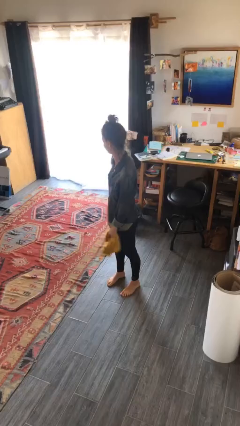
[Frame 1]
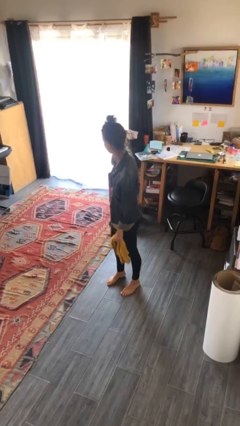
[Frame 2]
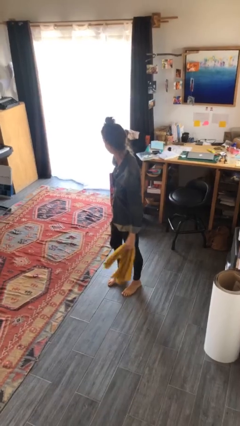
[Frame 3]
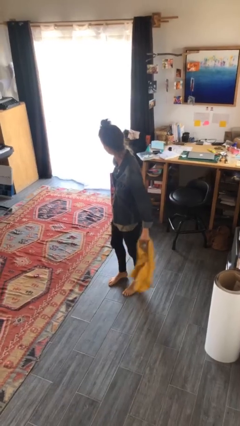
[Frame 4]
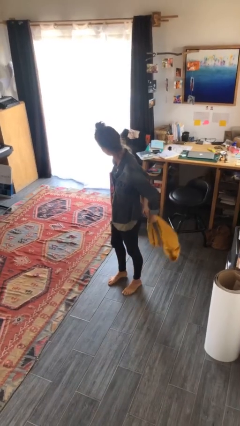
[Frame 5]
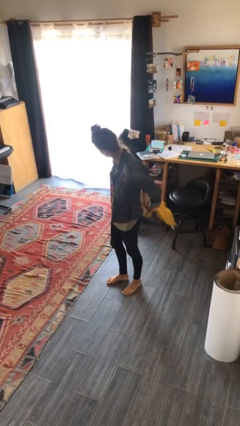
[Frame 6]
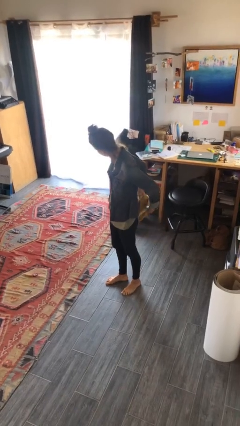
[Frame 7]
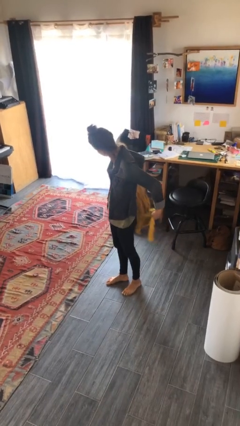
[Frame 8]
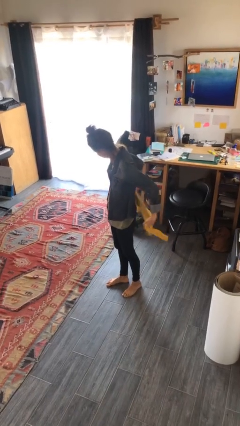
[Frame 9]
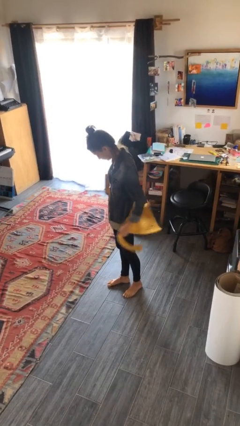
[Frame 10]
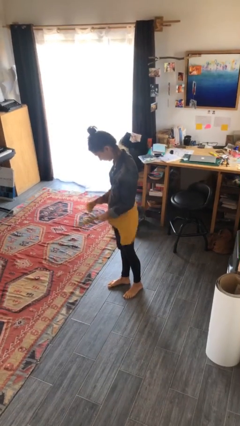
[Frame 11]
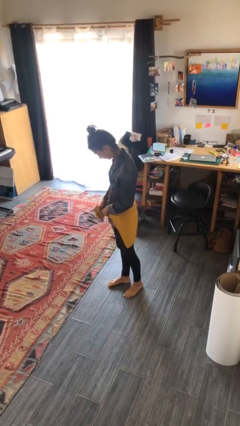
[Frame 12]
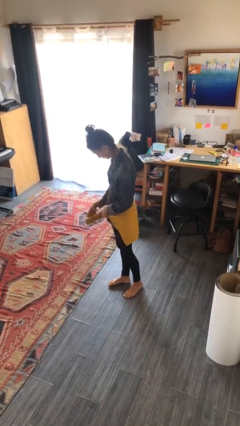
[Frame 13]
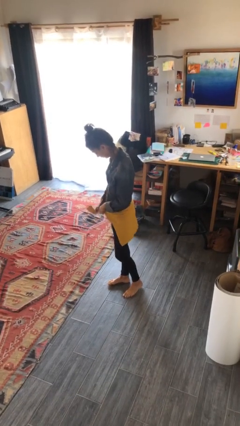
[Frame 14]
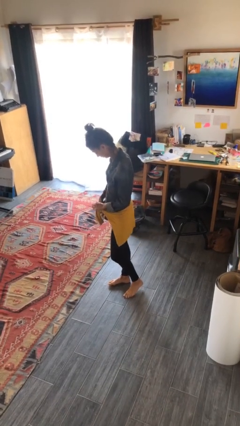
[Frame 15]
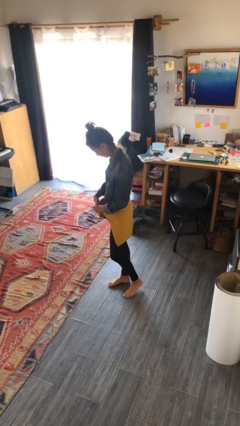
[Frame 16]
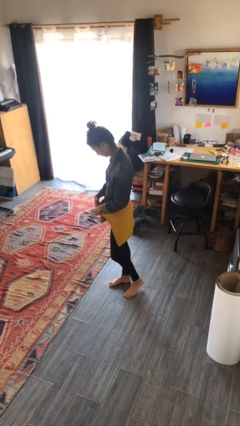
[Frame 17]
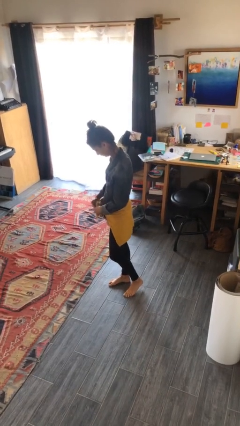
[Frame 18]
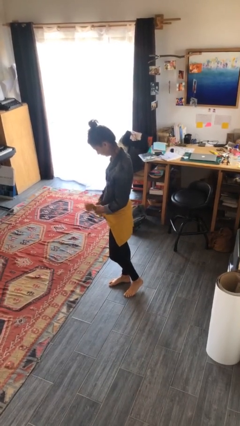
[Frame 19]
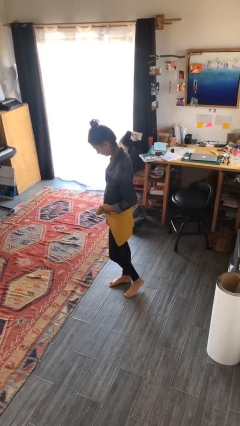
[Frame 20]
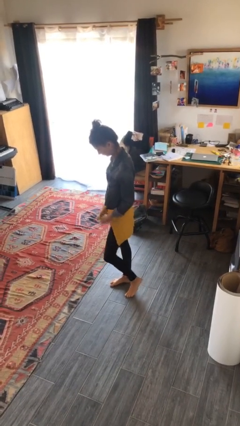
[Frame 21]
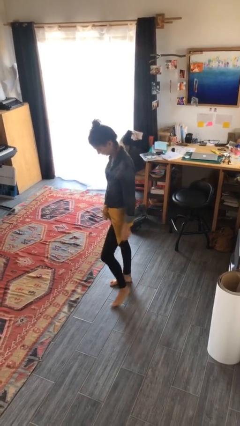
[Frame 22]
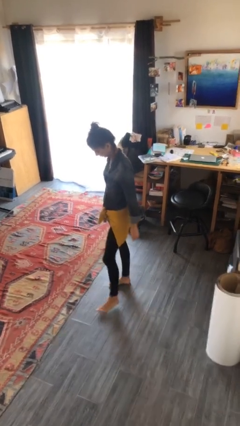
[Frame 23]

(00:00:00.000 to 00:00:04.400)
person ties jacket around waist

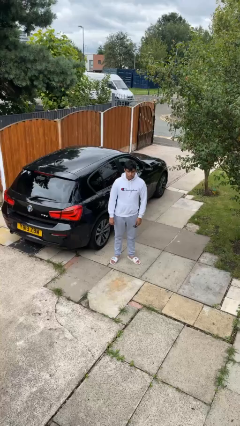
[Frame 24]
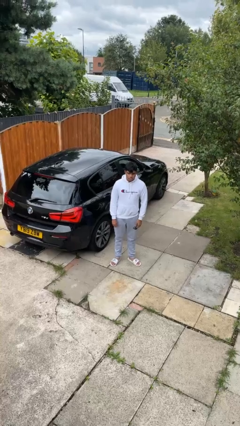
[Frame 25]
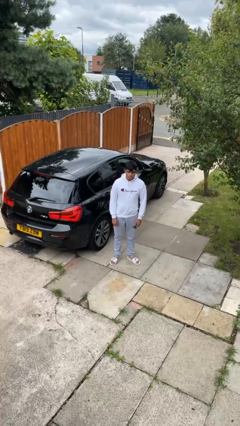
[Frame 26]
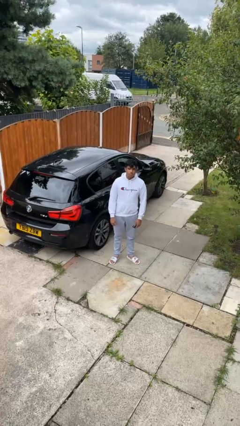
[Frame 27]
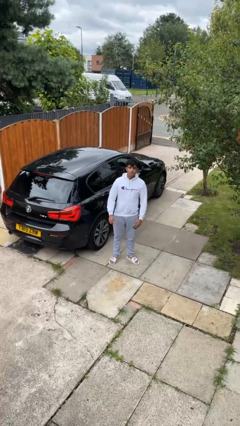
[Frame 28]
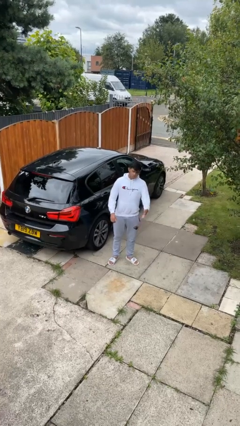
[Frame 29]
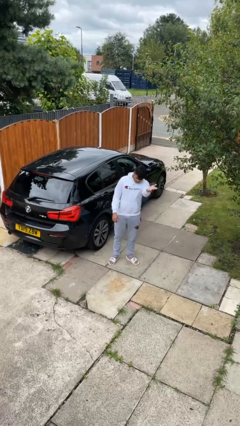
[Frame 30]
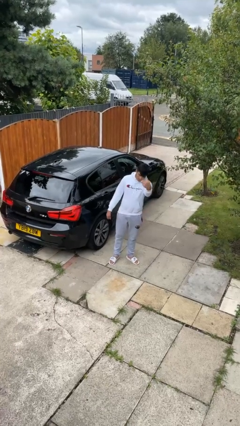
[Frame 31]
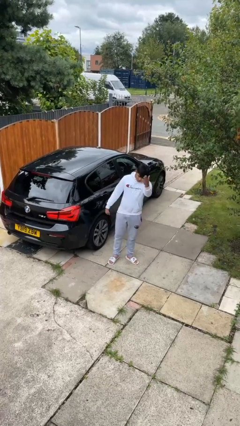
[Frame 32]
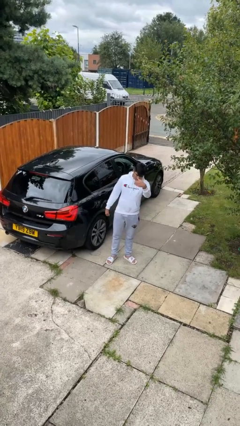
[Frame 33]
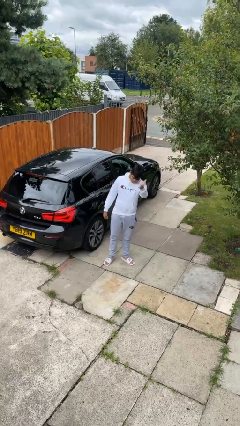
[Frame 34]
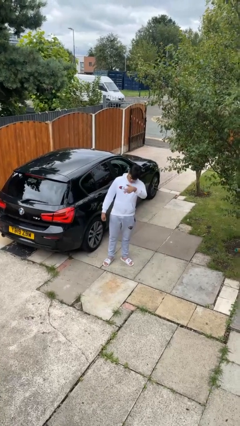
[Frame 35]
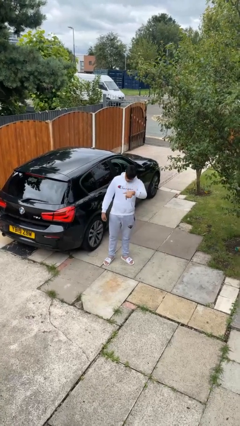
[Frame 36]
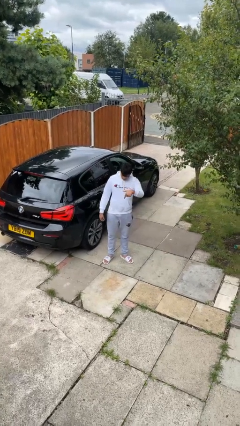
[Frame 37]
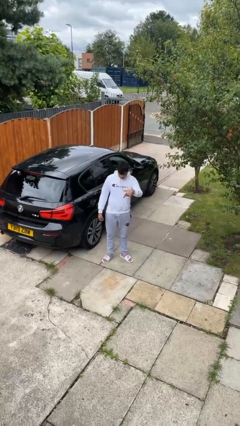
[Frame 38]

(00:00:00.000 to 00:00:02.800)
person gestures come here

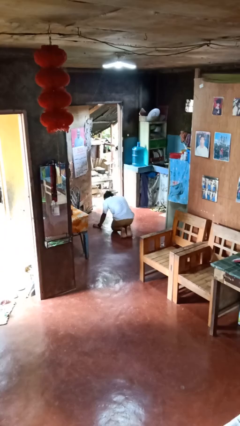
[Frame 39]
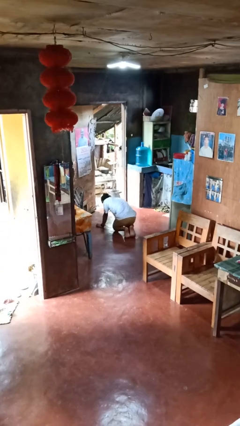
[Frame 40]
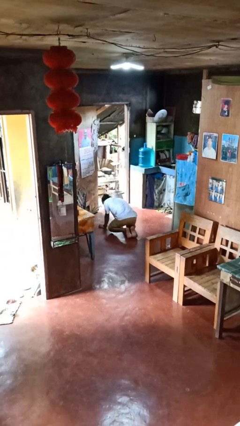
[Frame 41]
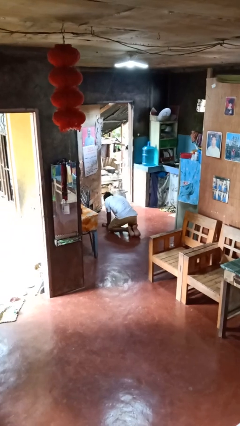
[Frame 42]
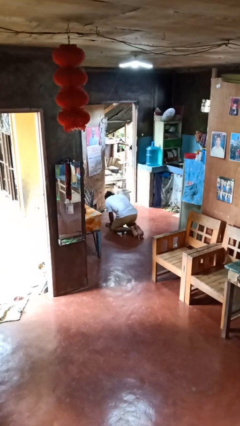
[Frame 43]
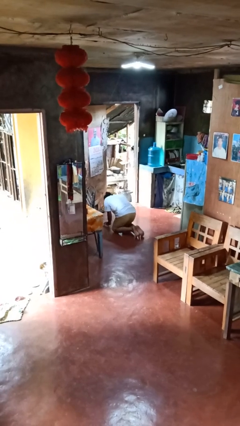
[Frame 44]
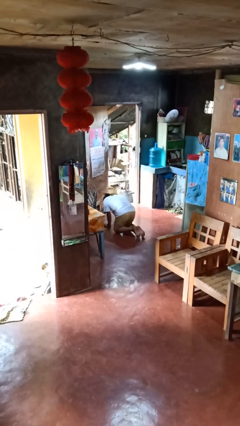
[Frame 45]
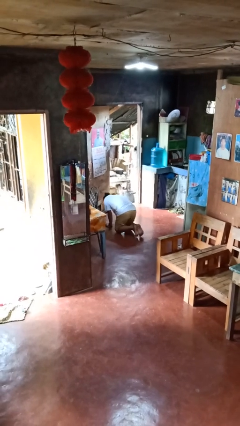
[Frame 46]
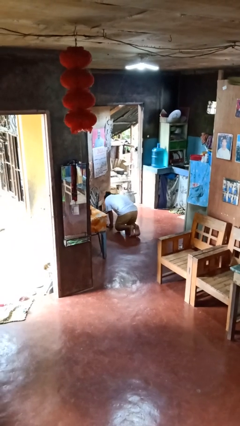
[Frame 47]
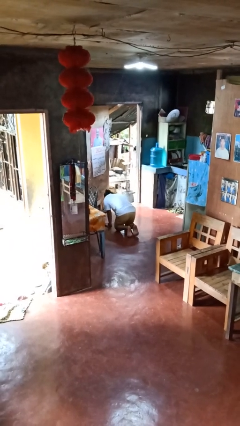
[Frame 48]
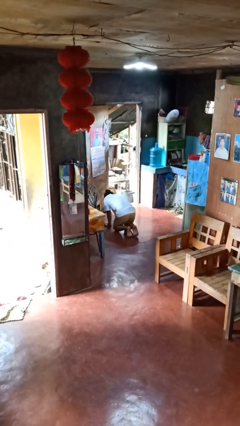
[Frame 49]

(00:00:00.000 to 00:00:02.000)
person crawls

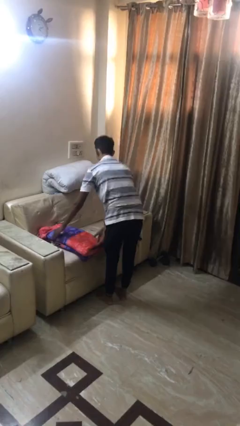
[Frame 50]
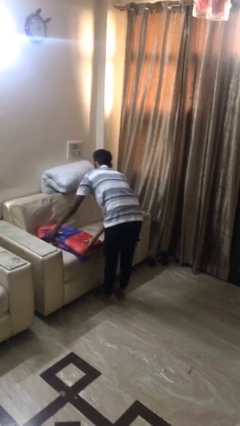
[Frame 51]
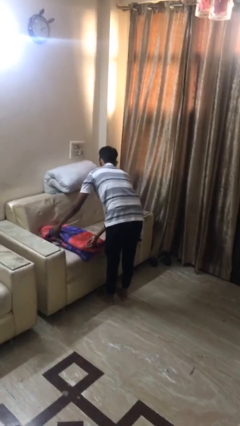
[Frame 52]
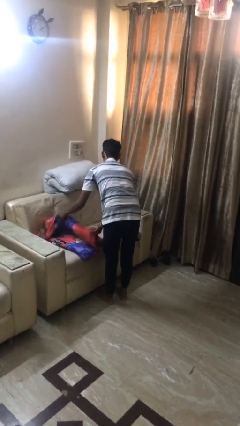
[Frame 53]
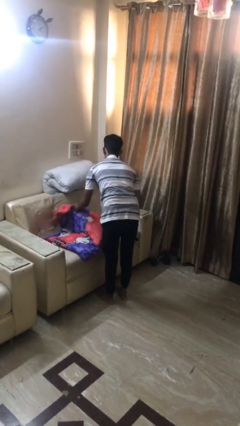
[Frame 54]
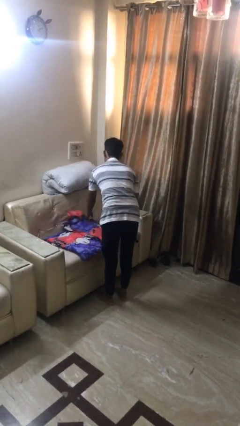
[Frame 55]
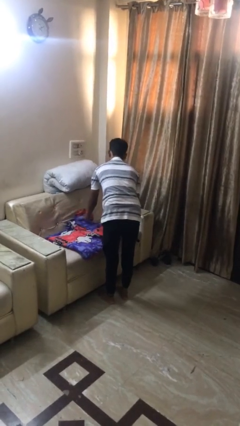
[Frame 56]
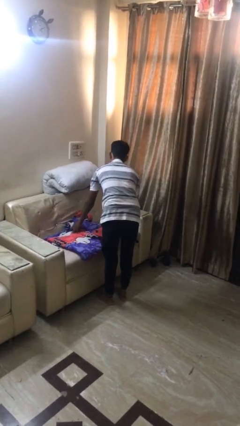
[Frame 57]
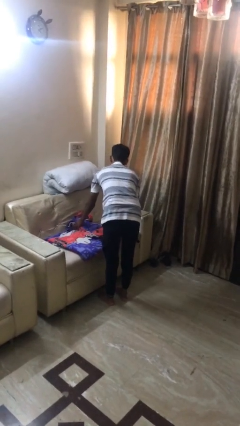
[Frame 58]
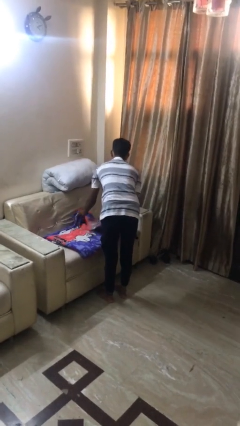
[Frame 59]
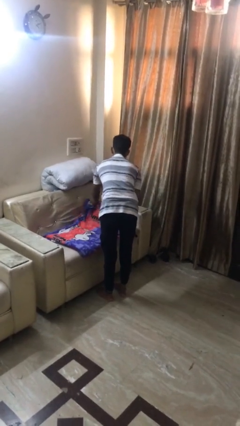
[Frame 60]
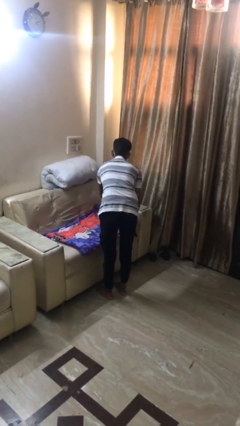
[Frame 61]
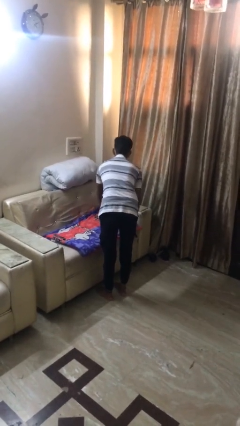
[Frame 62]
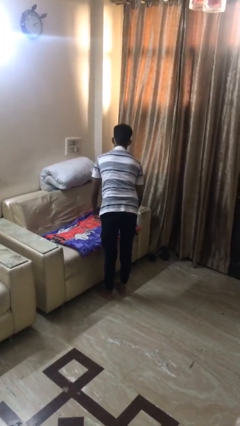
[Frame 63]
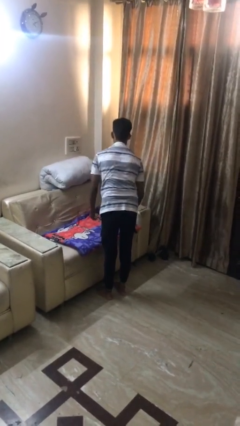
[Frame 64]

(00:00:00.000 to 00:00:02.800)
person unfolds blanket

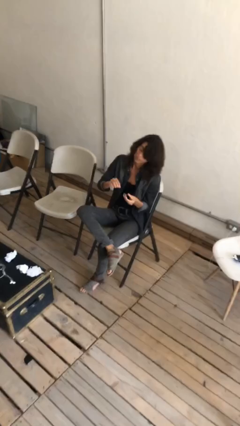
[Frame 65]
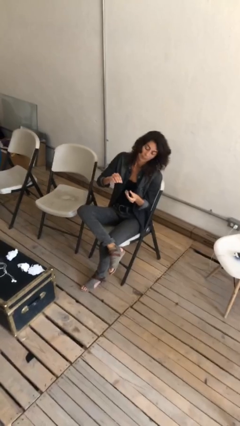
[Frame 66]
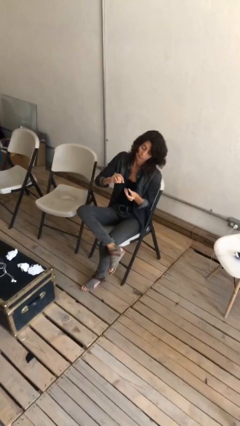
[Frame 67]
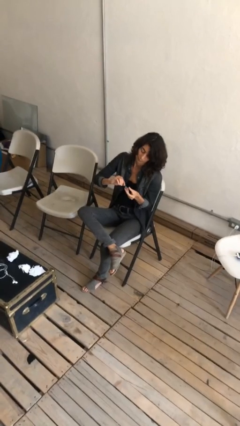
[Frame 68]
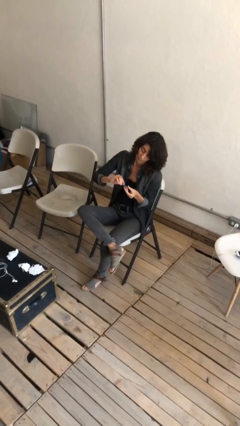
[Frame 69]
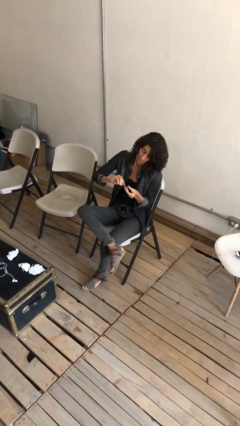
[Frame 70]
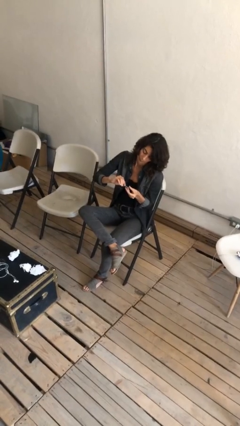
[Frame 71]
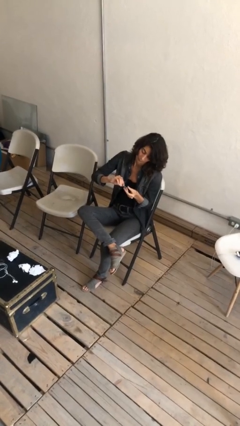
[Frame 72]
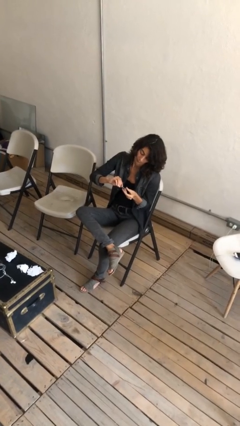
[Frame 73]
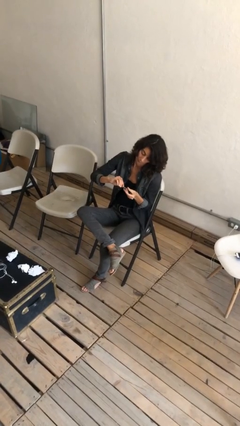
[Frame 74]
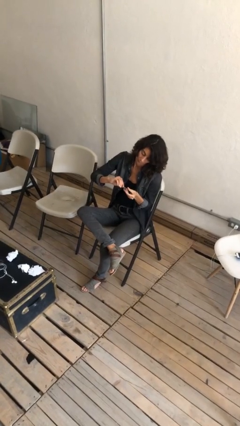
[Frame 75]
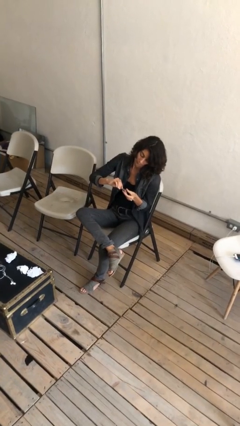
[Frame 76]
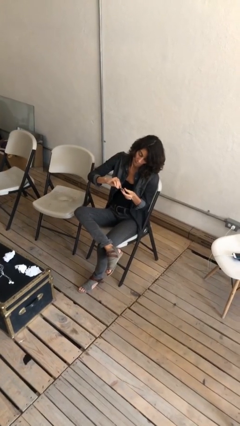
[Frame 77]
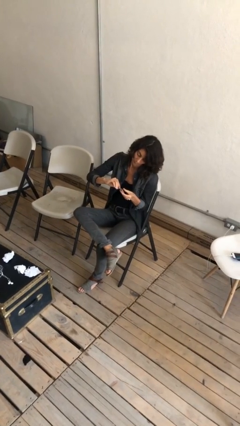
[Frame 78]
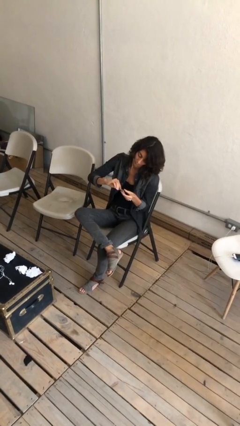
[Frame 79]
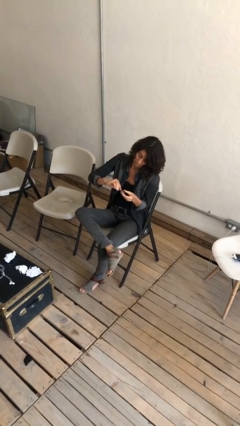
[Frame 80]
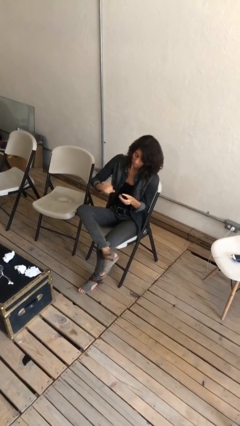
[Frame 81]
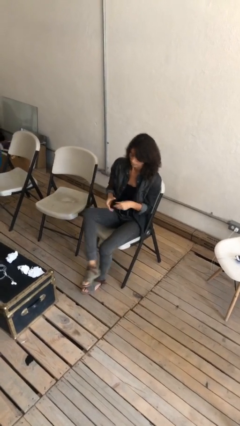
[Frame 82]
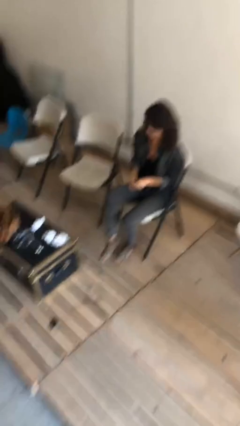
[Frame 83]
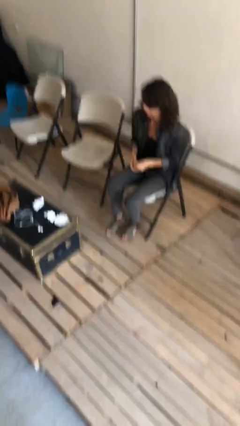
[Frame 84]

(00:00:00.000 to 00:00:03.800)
person clips fingernails

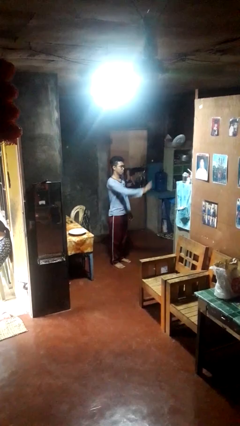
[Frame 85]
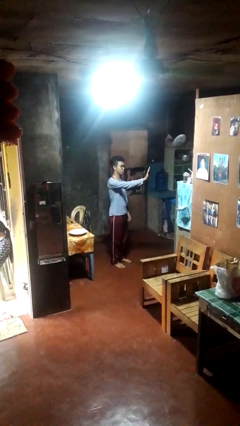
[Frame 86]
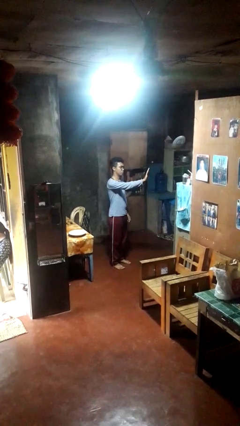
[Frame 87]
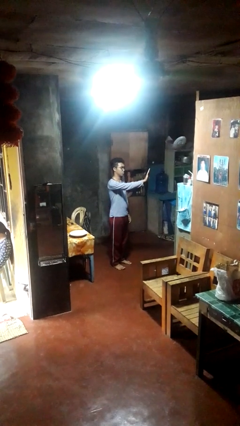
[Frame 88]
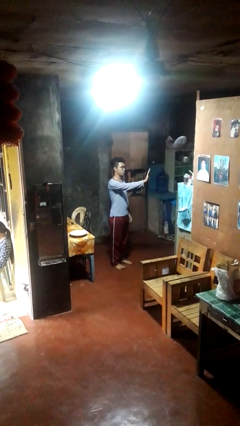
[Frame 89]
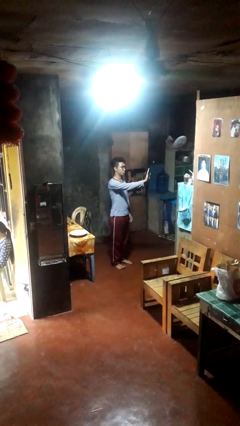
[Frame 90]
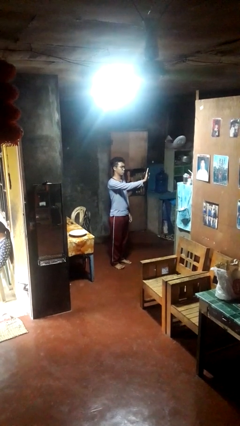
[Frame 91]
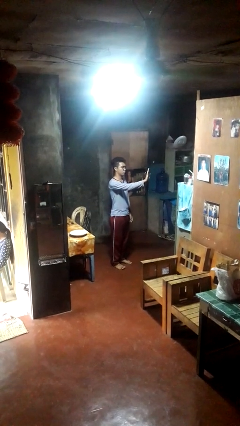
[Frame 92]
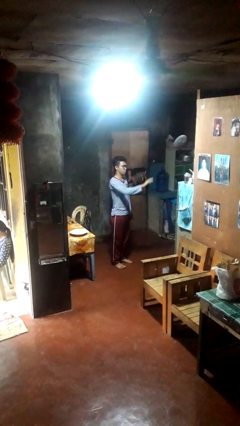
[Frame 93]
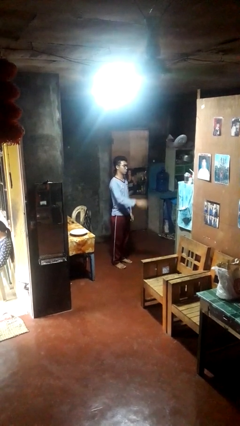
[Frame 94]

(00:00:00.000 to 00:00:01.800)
person gestures stop
